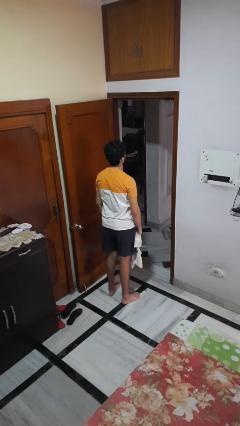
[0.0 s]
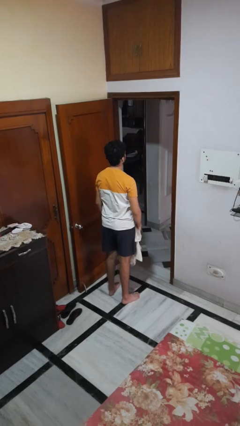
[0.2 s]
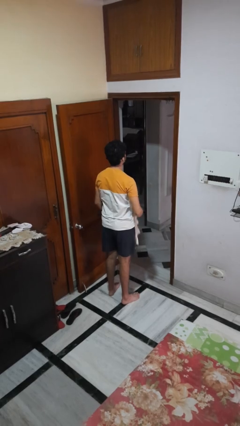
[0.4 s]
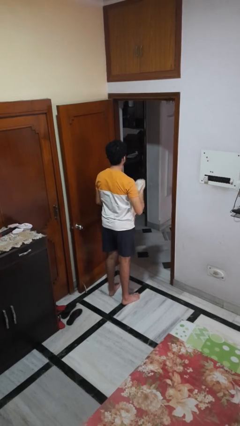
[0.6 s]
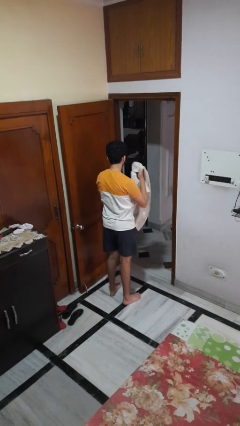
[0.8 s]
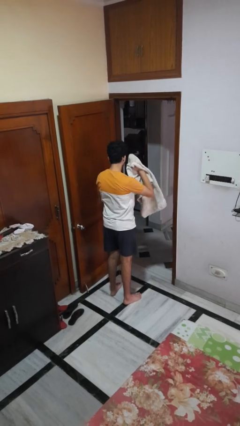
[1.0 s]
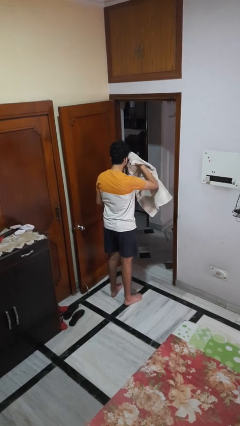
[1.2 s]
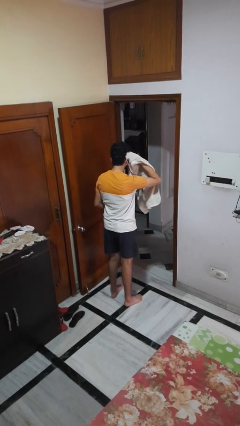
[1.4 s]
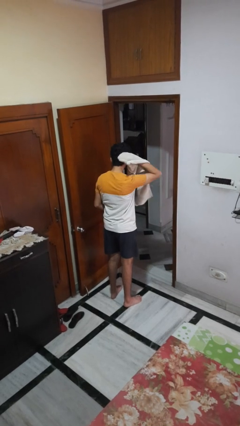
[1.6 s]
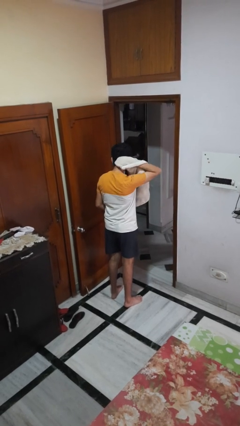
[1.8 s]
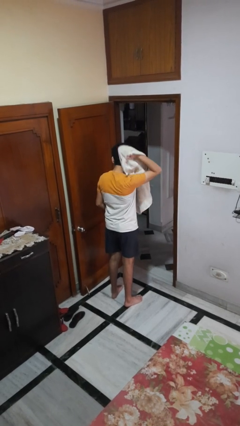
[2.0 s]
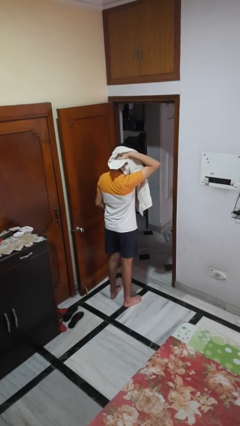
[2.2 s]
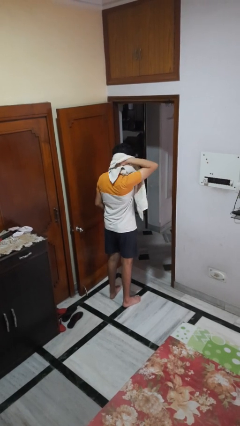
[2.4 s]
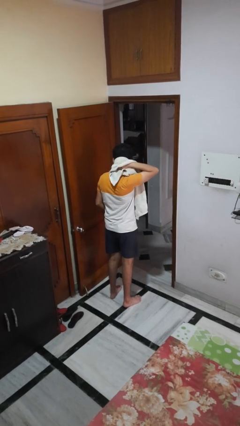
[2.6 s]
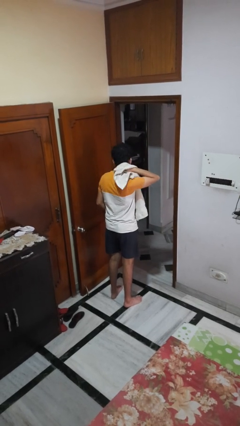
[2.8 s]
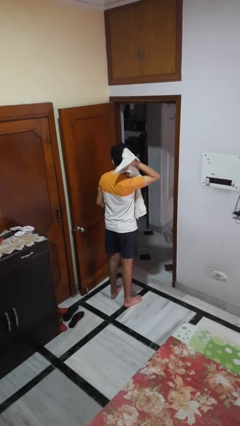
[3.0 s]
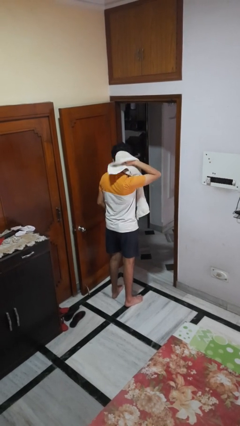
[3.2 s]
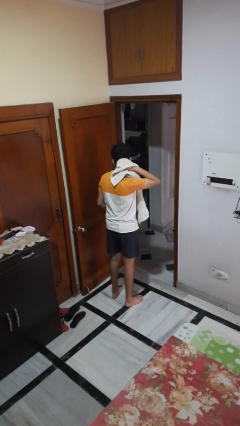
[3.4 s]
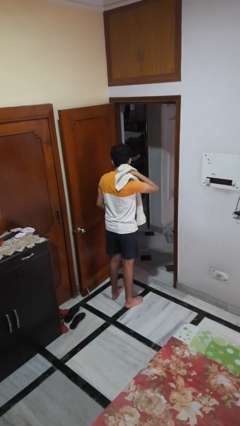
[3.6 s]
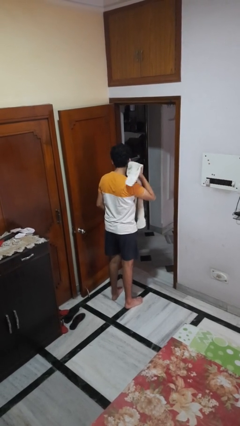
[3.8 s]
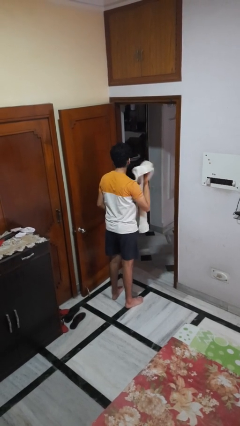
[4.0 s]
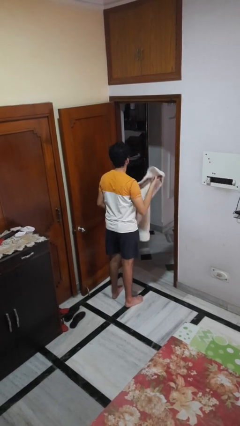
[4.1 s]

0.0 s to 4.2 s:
person dries hair with towel

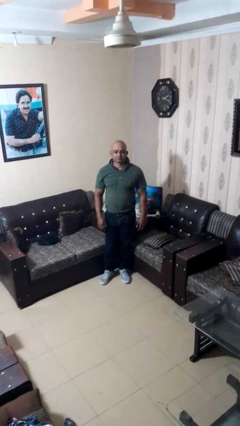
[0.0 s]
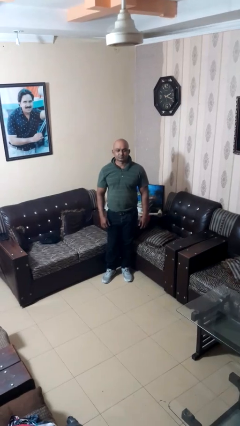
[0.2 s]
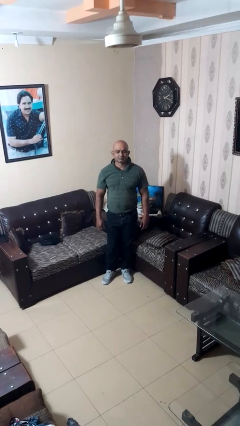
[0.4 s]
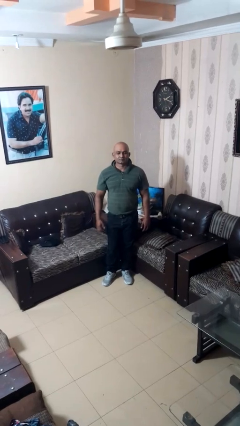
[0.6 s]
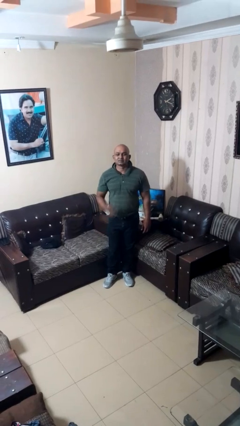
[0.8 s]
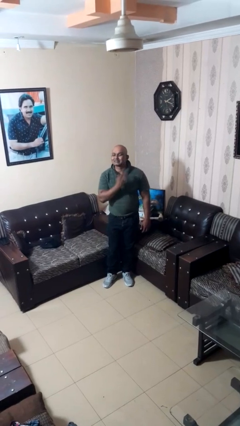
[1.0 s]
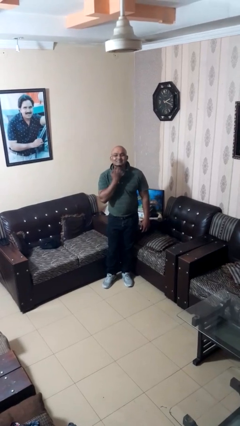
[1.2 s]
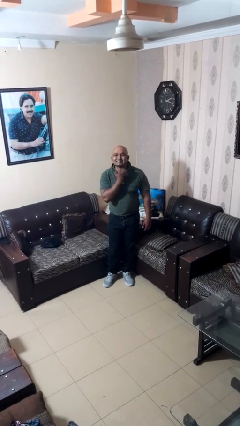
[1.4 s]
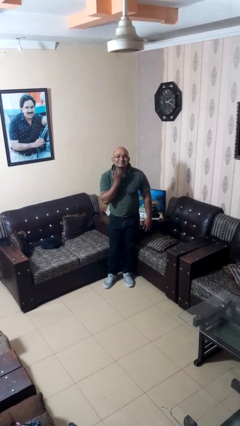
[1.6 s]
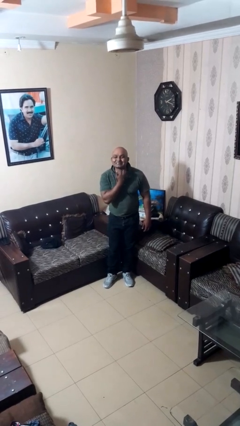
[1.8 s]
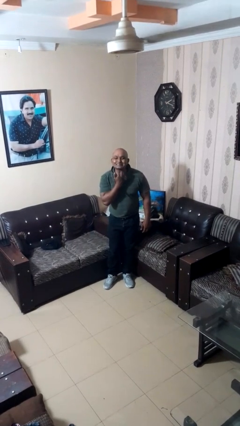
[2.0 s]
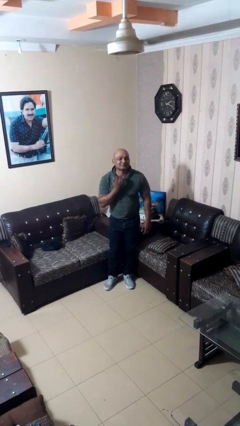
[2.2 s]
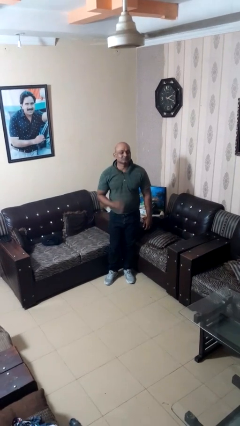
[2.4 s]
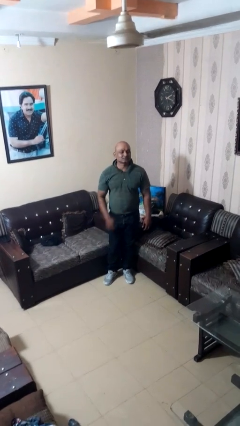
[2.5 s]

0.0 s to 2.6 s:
person gestures cut

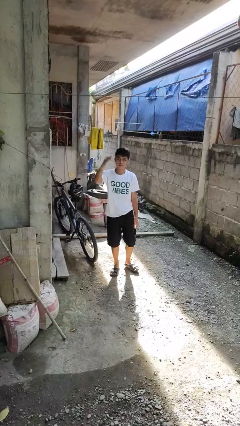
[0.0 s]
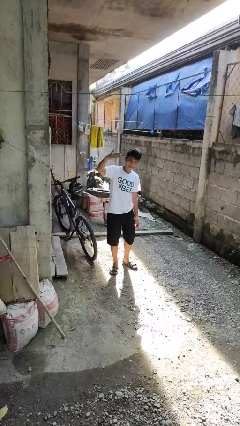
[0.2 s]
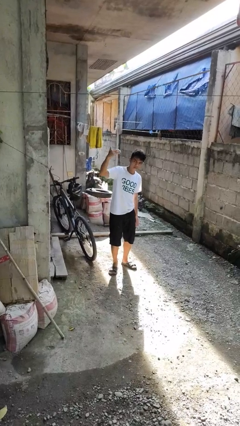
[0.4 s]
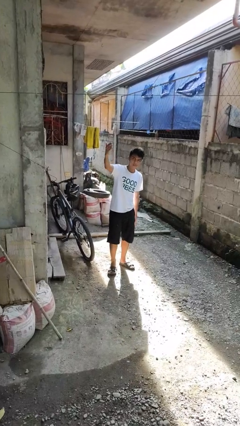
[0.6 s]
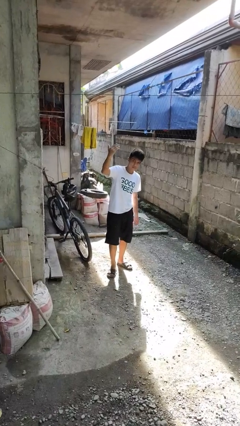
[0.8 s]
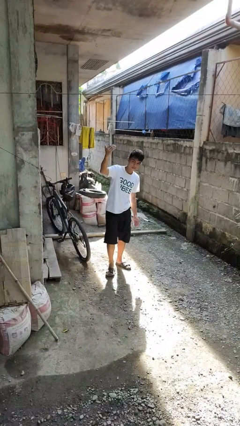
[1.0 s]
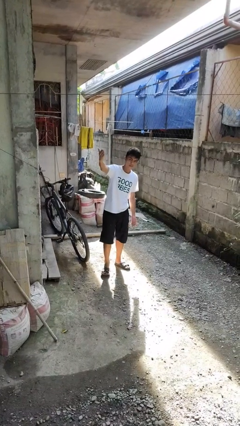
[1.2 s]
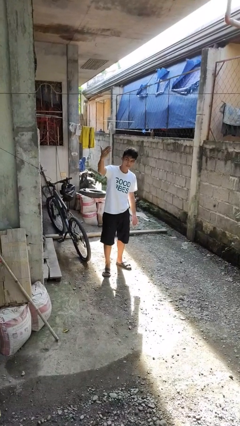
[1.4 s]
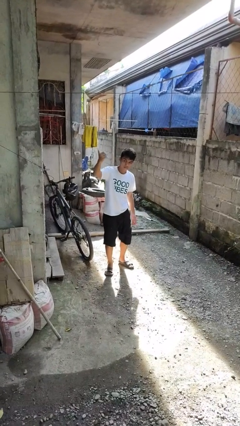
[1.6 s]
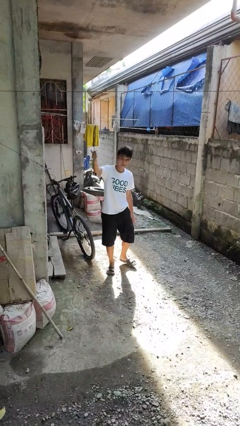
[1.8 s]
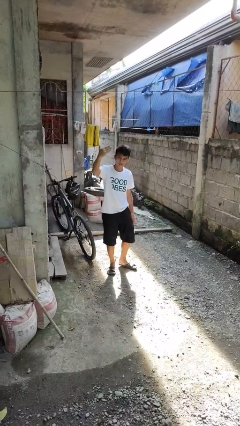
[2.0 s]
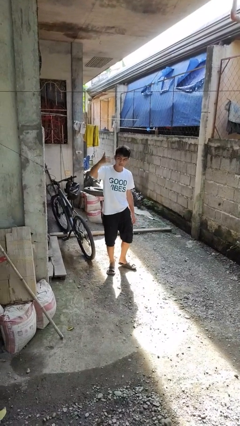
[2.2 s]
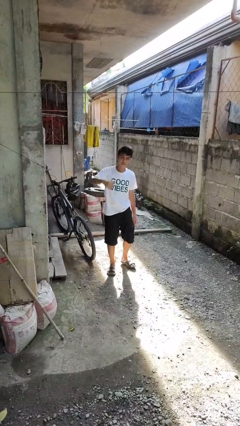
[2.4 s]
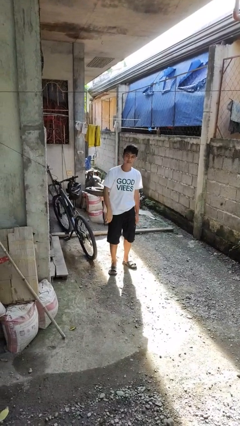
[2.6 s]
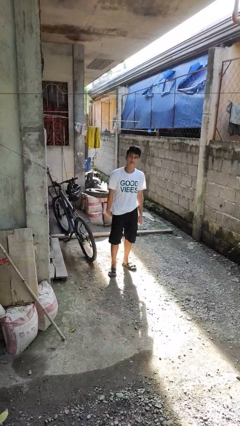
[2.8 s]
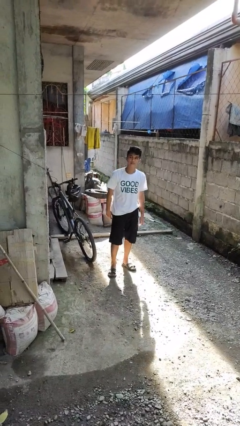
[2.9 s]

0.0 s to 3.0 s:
person gestures come here

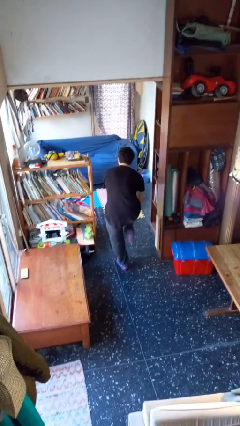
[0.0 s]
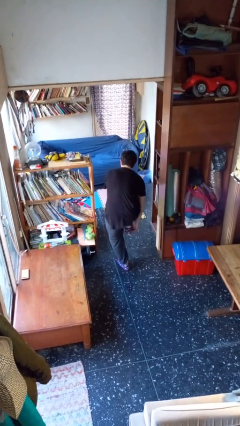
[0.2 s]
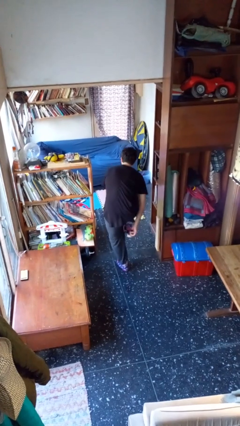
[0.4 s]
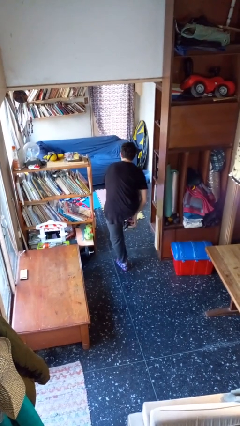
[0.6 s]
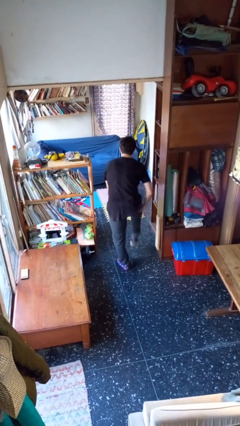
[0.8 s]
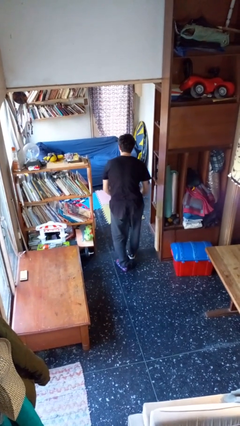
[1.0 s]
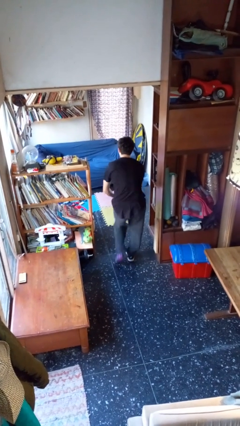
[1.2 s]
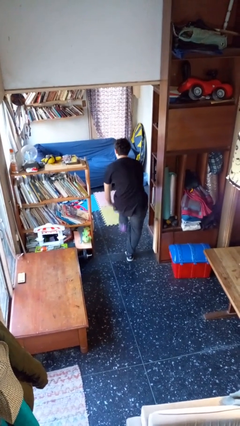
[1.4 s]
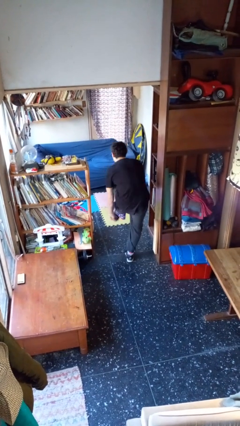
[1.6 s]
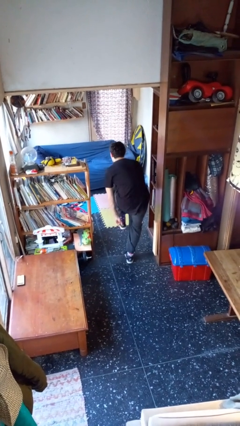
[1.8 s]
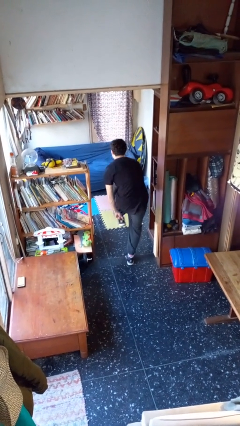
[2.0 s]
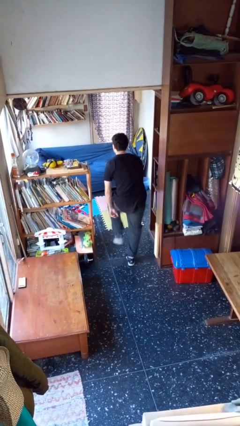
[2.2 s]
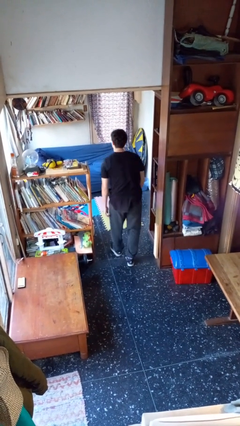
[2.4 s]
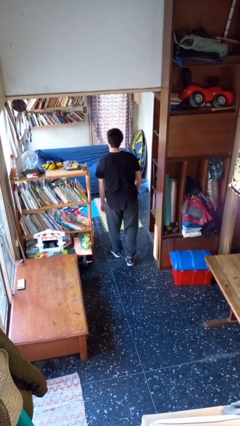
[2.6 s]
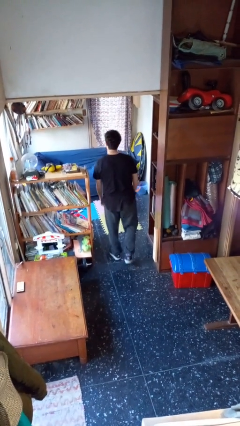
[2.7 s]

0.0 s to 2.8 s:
person puts on shoes

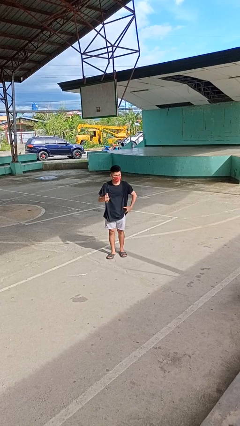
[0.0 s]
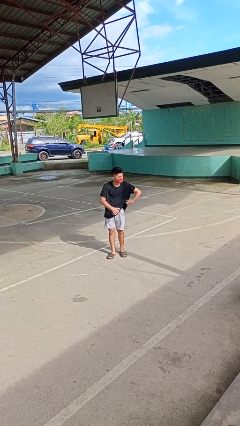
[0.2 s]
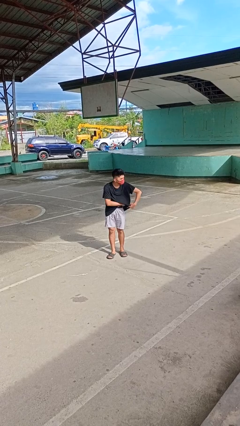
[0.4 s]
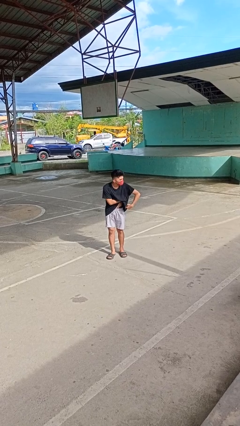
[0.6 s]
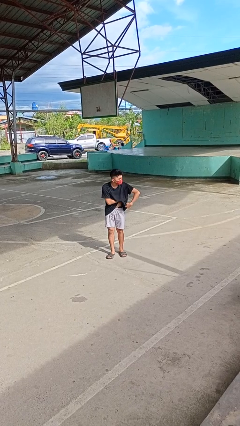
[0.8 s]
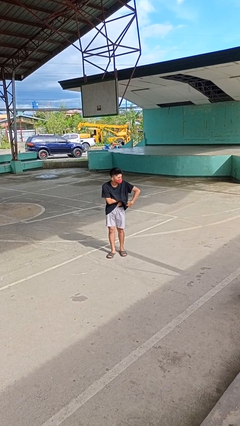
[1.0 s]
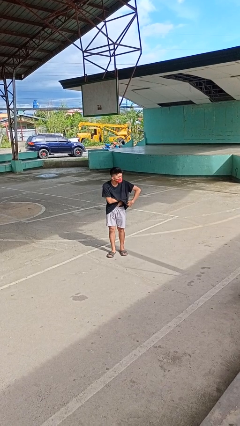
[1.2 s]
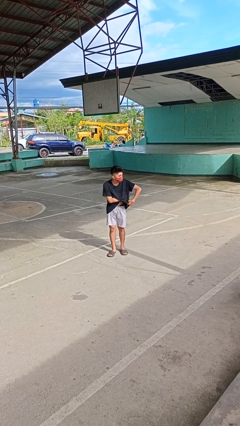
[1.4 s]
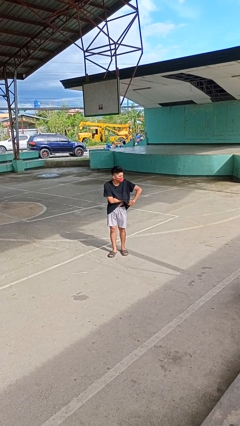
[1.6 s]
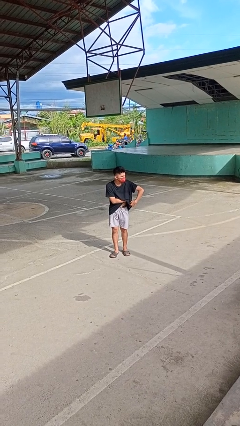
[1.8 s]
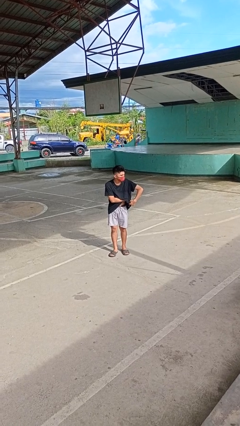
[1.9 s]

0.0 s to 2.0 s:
person applies deodorant

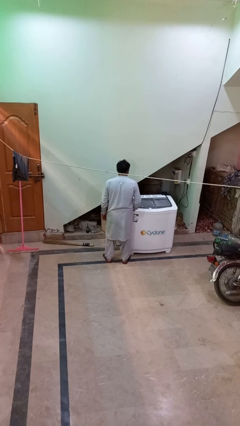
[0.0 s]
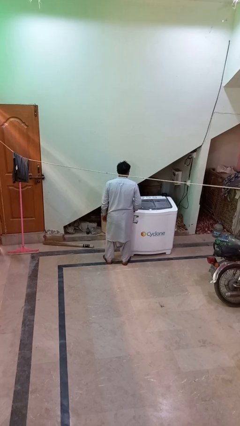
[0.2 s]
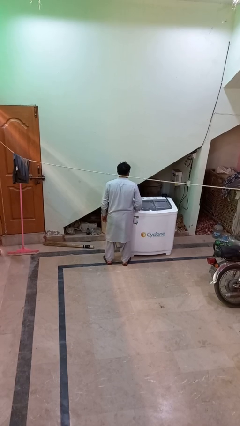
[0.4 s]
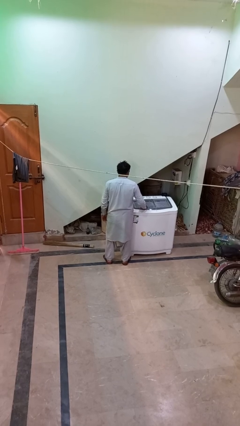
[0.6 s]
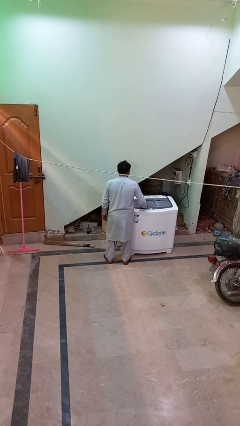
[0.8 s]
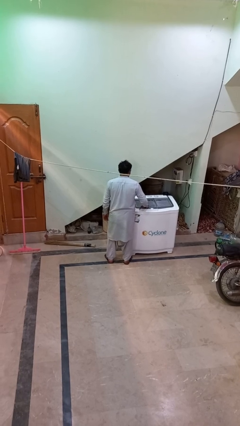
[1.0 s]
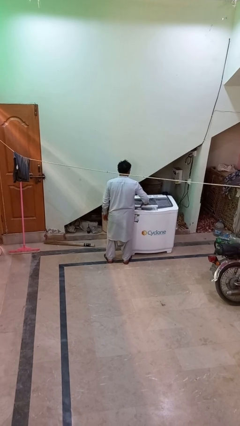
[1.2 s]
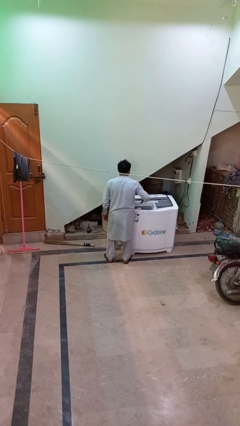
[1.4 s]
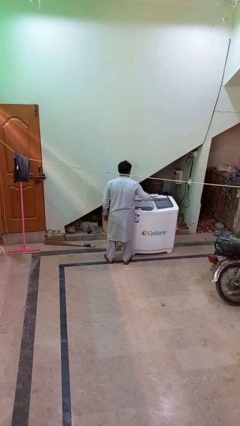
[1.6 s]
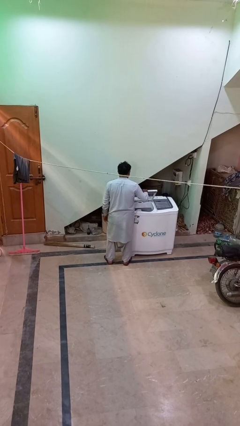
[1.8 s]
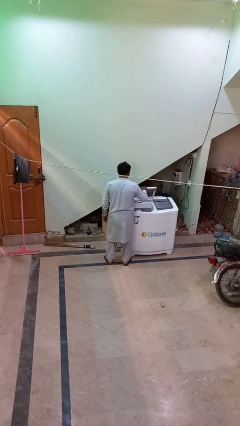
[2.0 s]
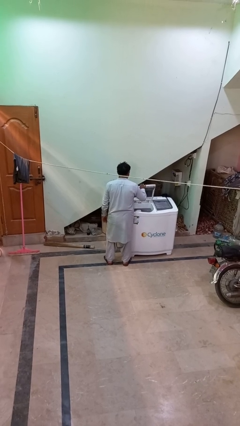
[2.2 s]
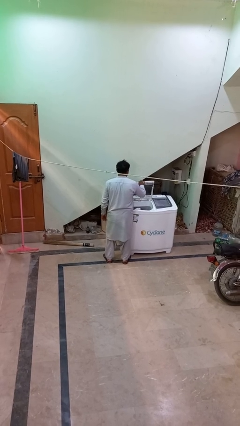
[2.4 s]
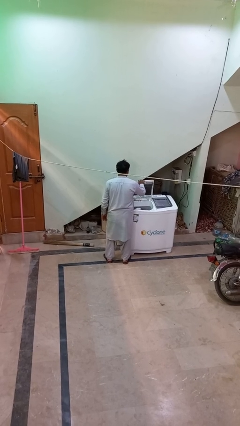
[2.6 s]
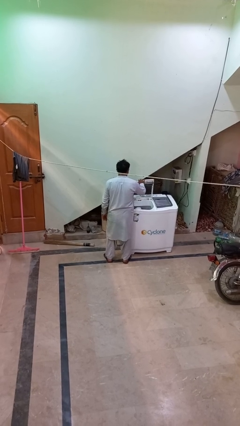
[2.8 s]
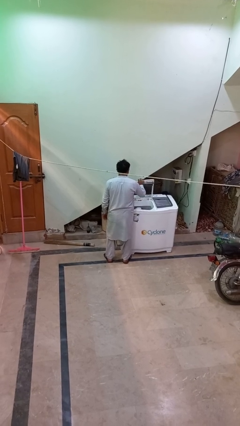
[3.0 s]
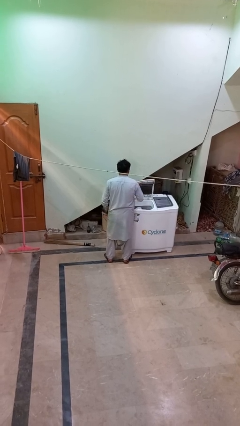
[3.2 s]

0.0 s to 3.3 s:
person opens clothes washer
